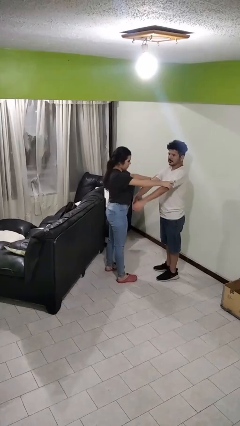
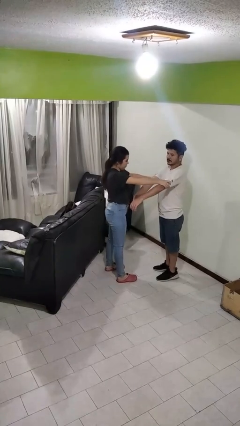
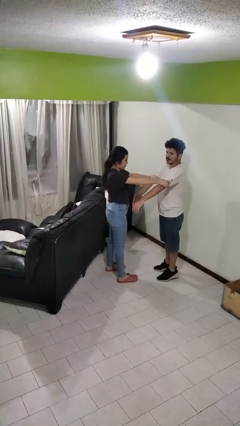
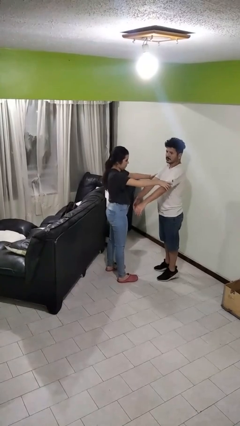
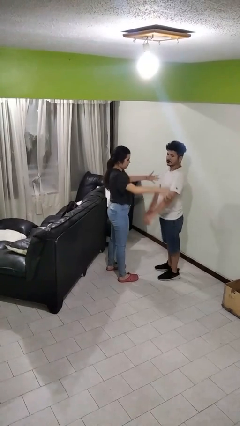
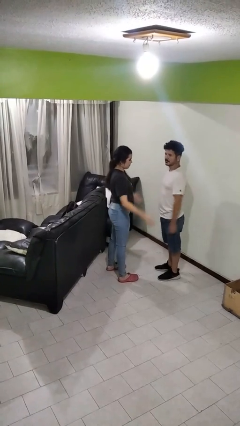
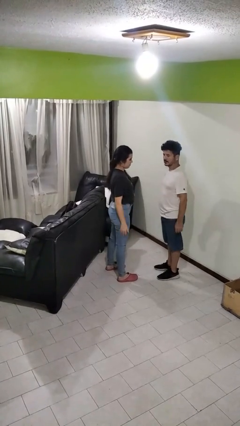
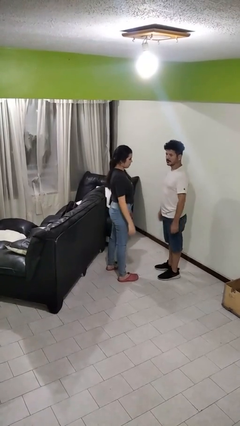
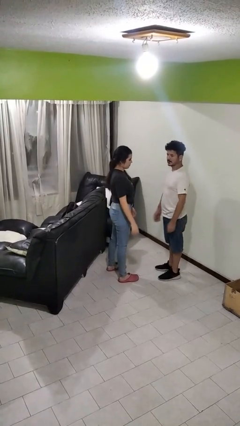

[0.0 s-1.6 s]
person grabs person by bicep

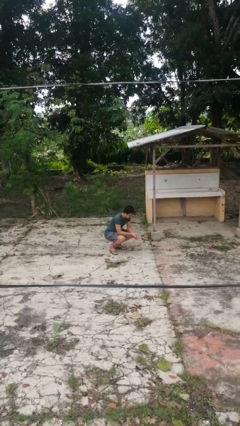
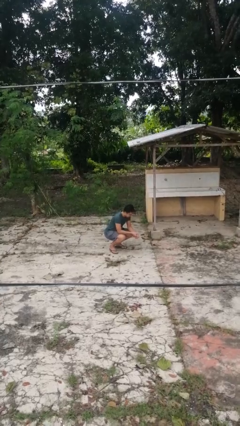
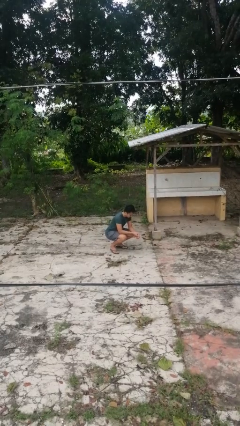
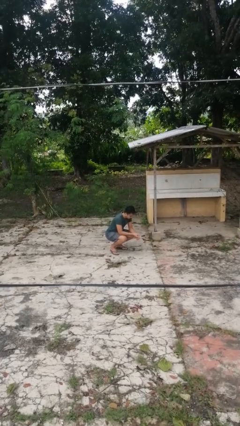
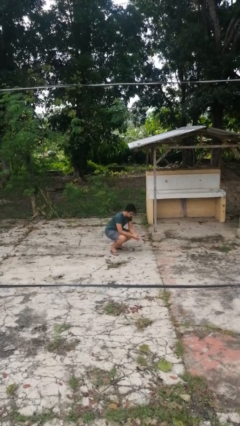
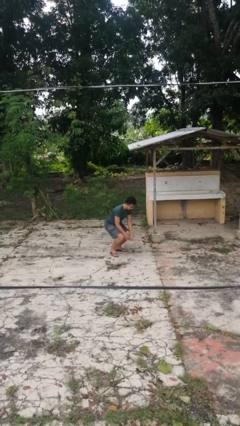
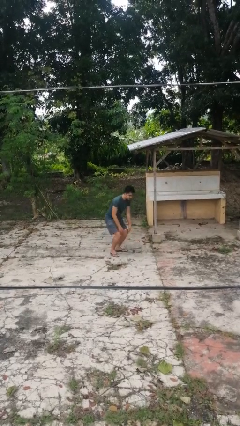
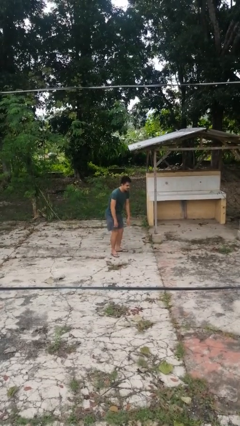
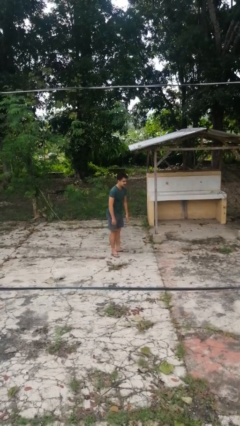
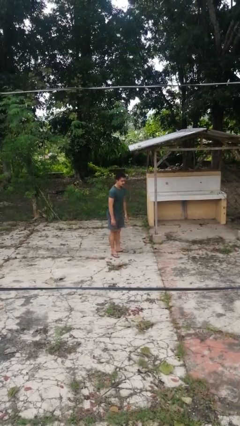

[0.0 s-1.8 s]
person stands up

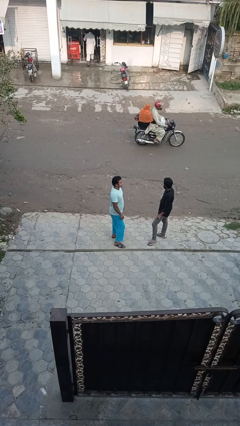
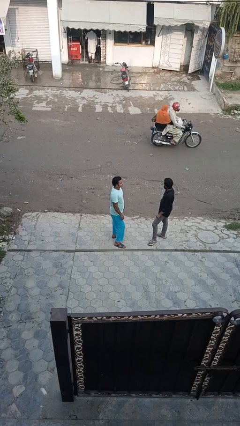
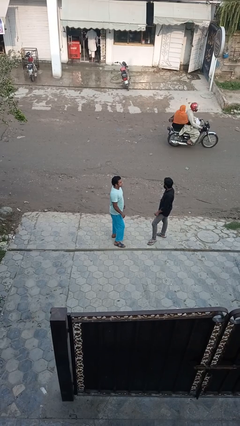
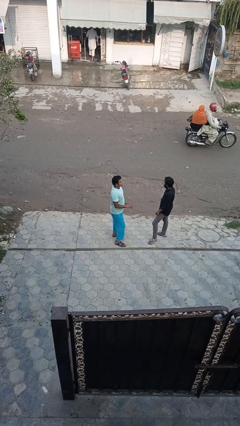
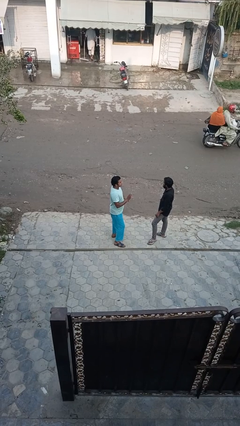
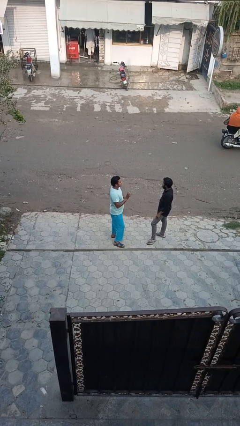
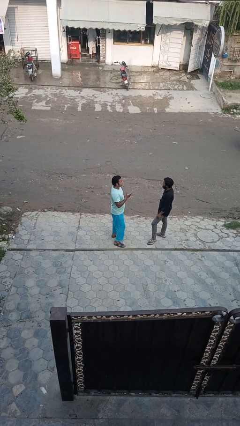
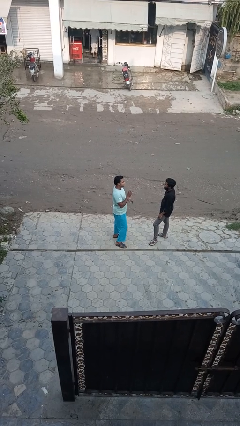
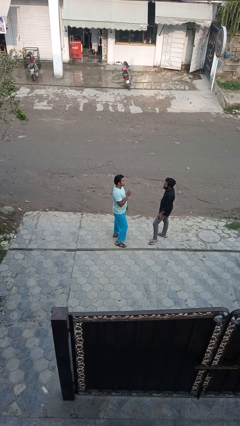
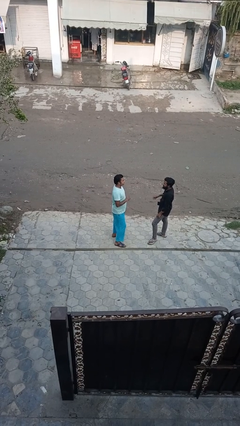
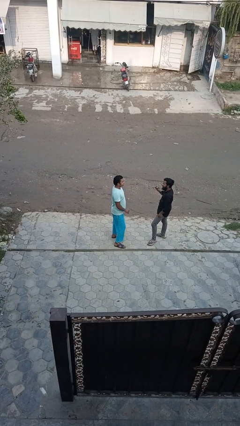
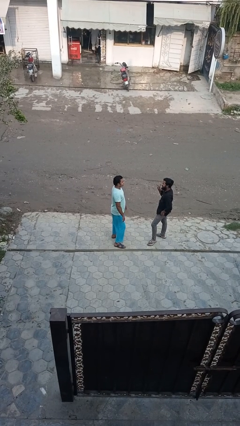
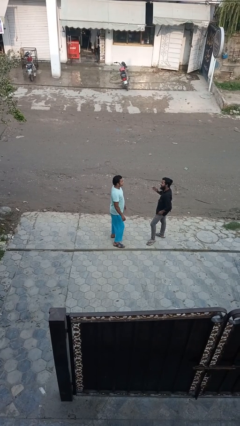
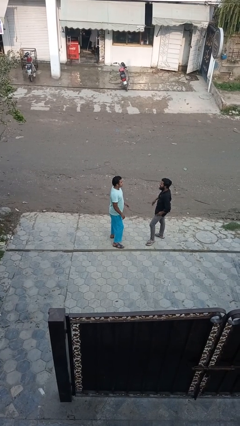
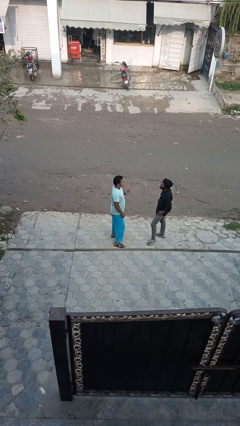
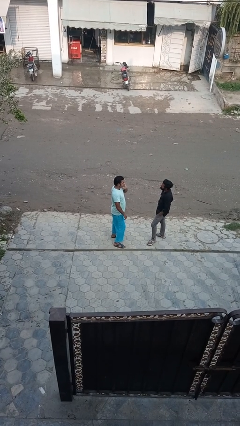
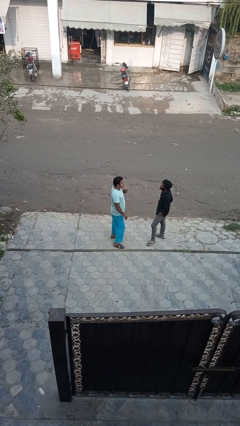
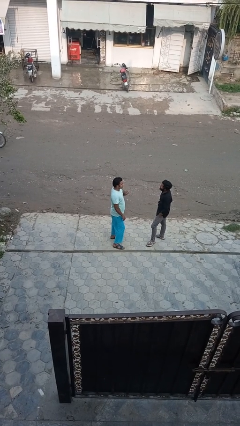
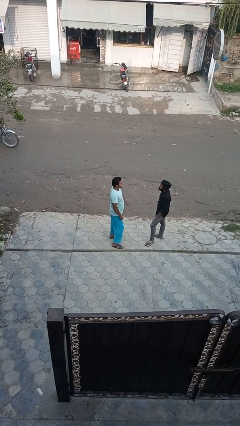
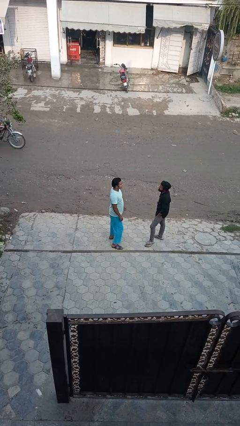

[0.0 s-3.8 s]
person talks to person

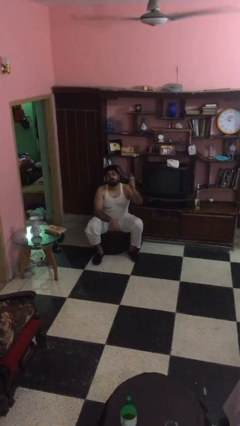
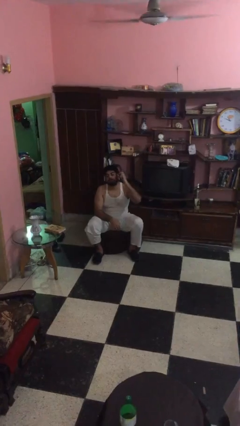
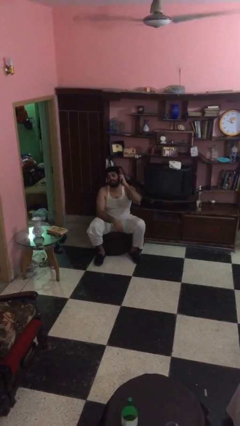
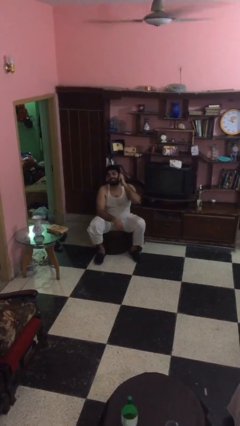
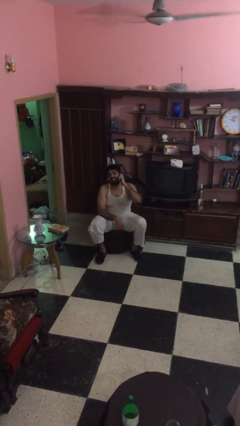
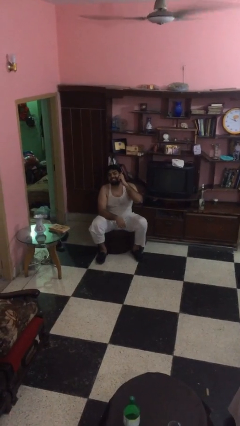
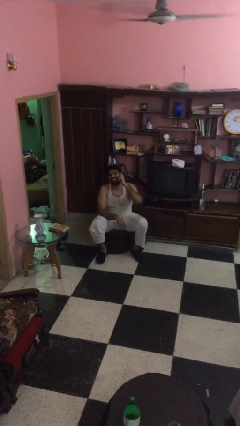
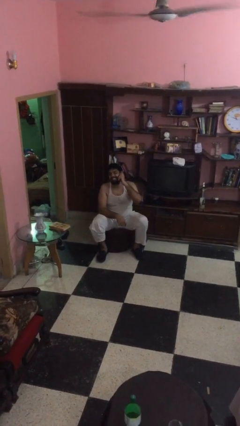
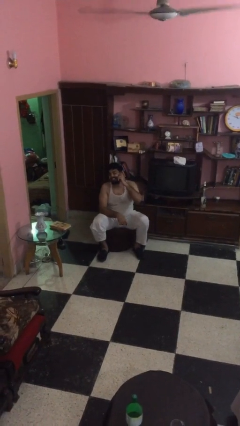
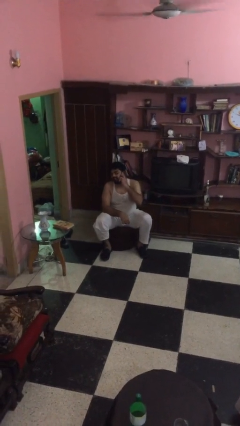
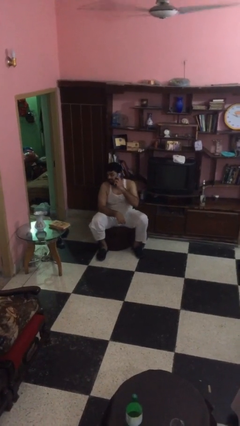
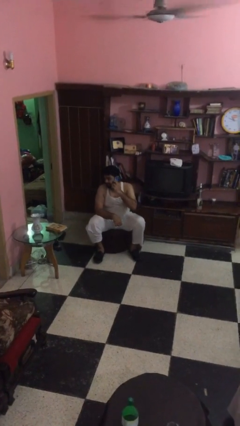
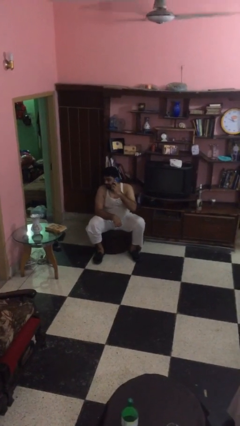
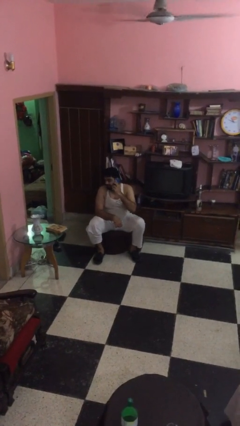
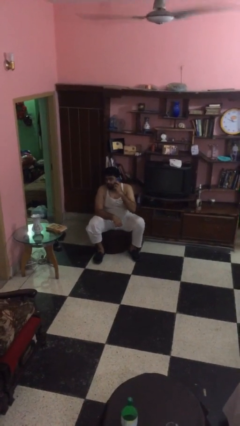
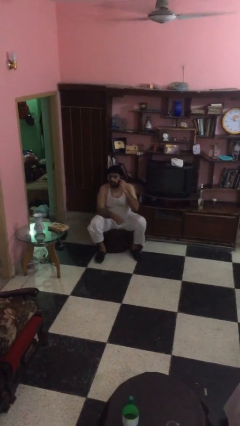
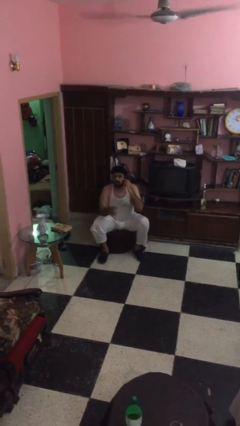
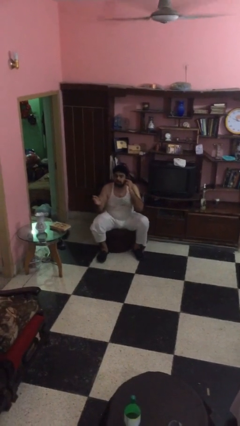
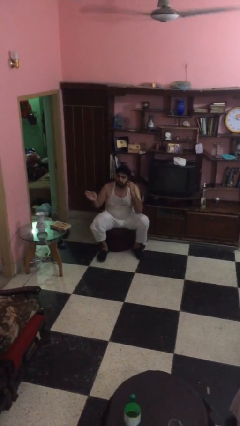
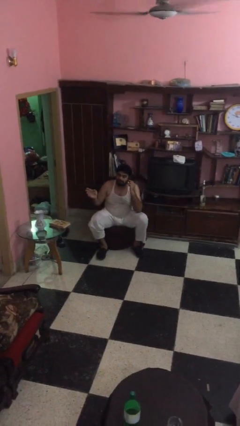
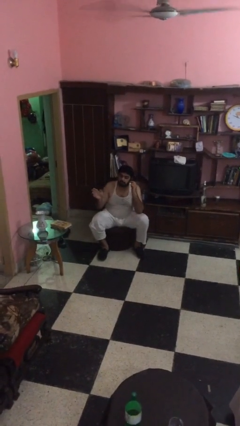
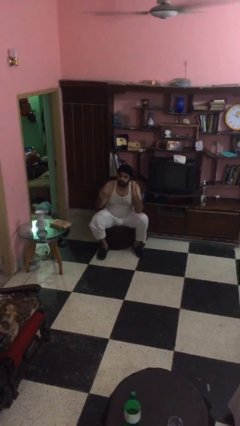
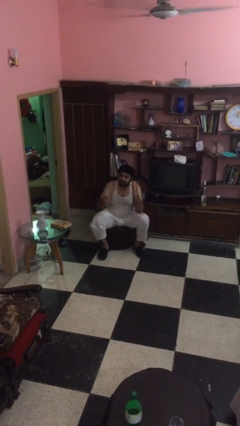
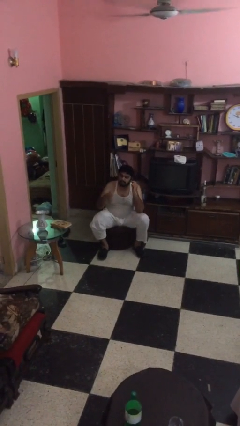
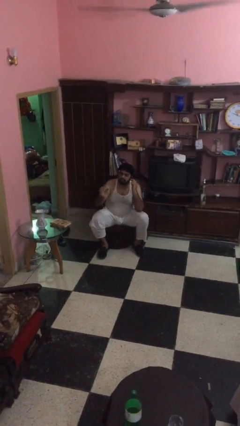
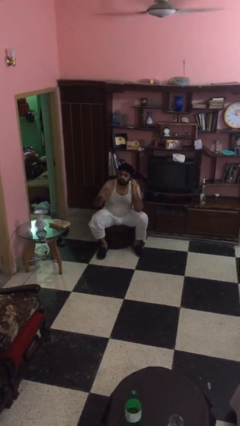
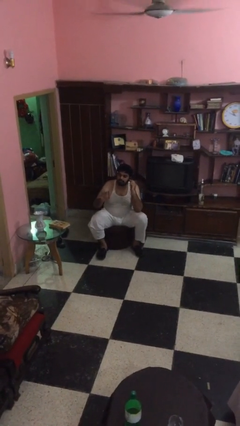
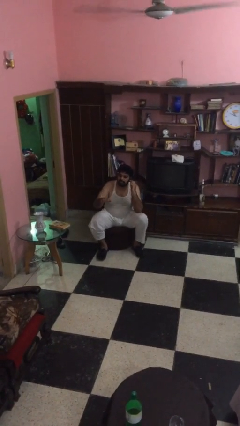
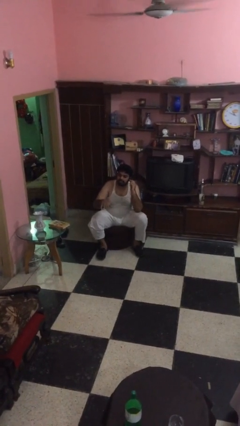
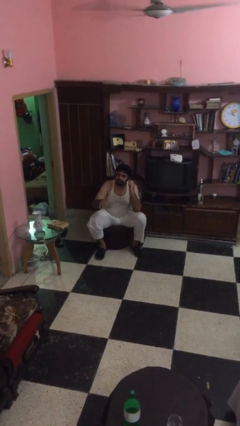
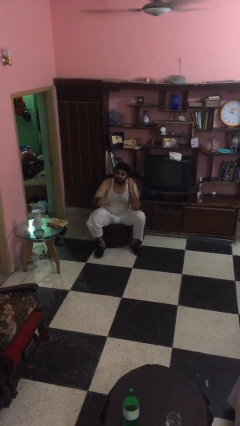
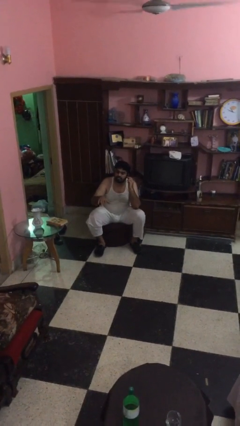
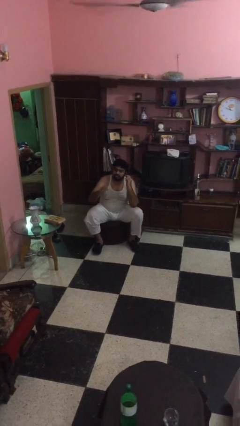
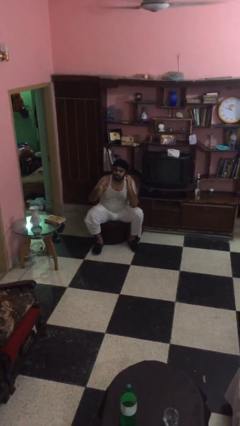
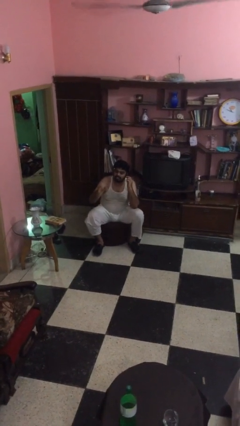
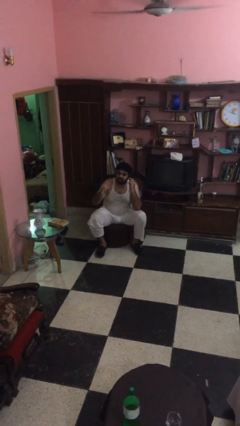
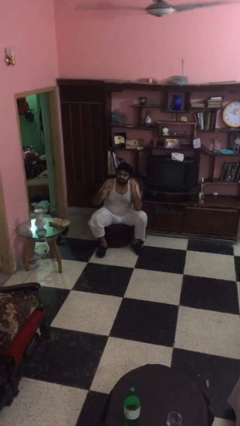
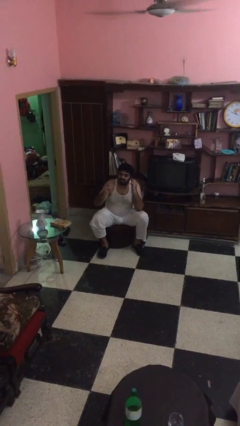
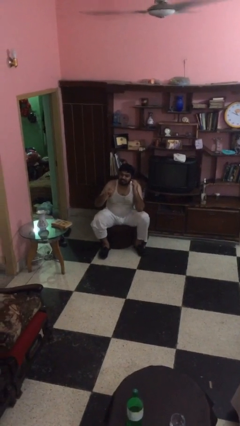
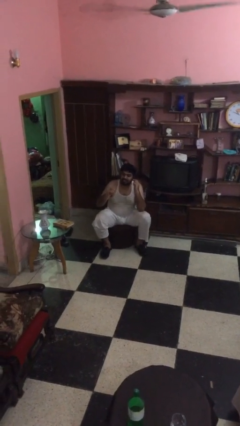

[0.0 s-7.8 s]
person talks on phone

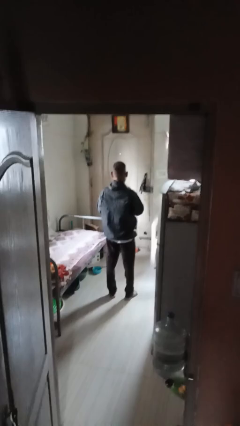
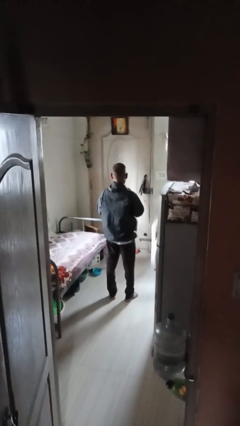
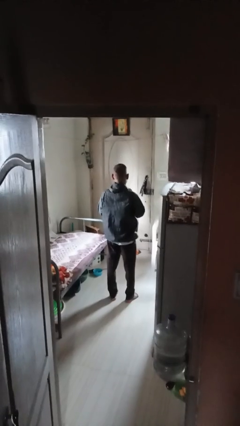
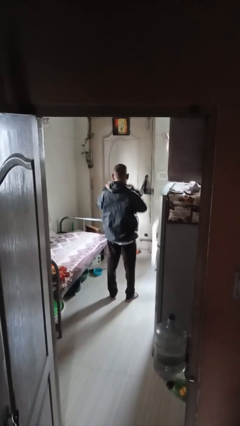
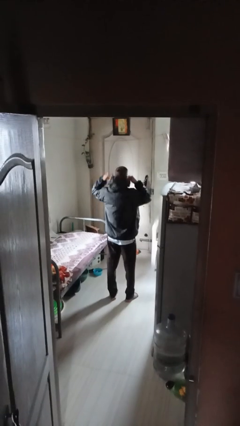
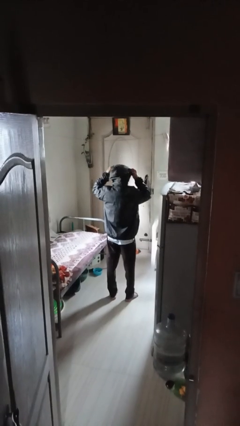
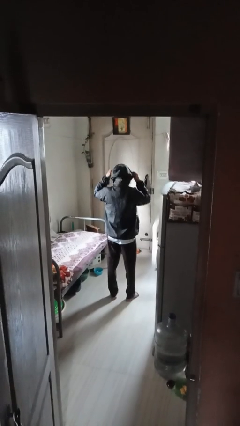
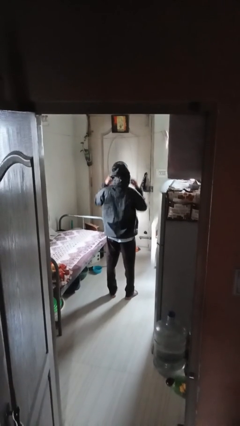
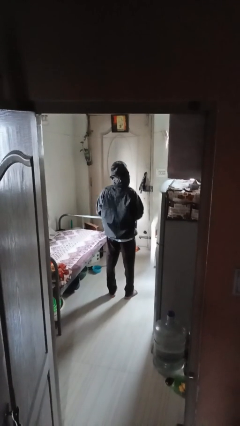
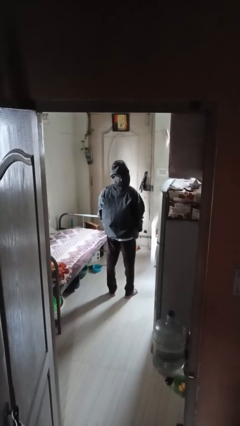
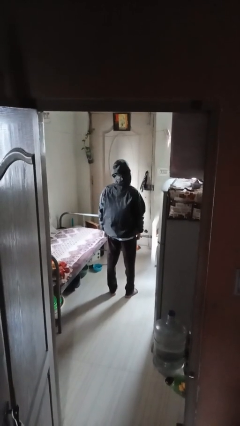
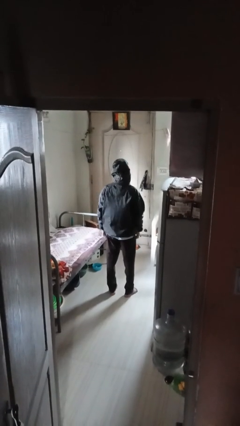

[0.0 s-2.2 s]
person puts on hoodie

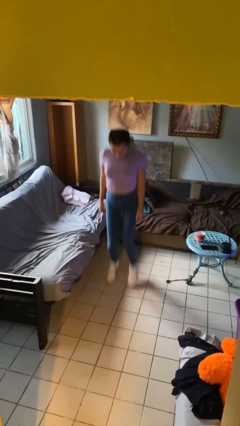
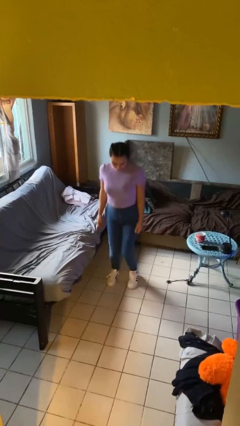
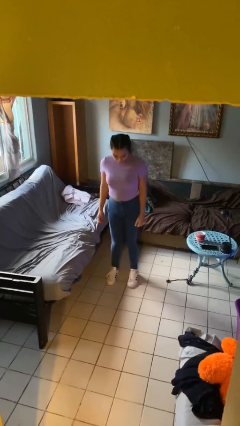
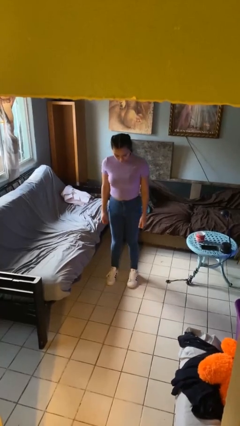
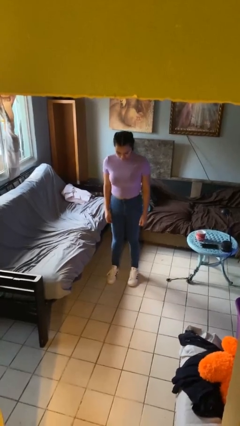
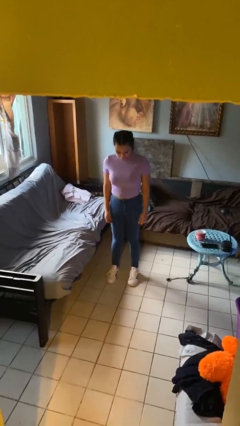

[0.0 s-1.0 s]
person jumps
